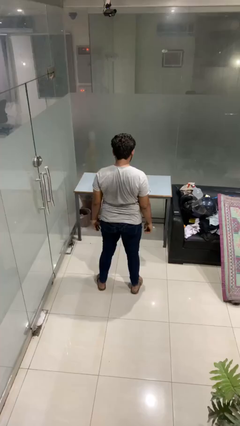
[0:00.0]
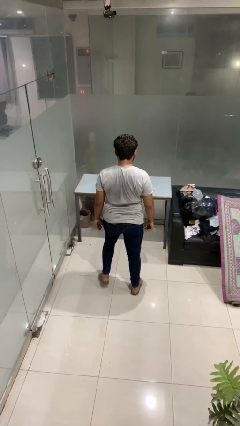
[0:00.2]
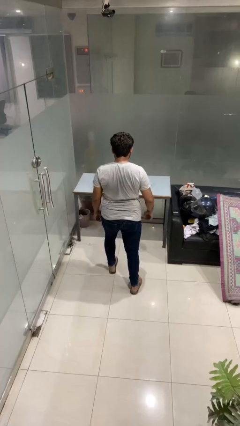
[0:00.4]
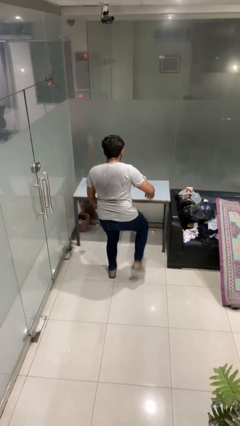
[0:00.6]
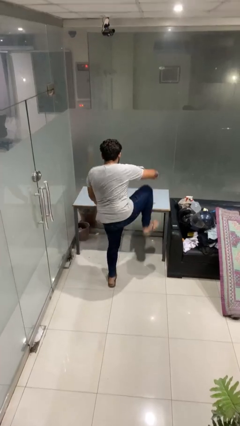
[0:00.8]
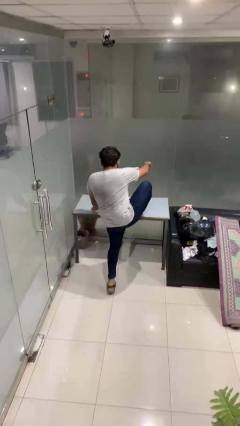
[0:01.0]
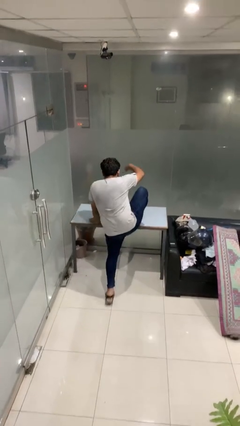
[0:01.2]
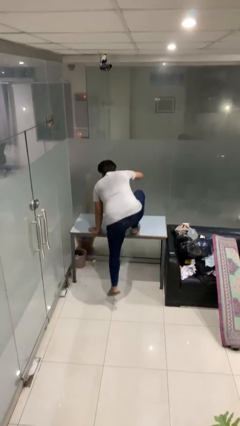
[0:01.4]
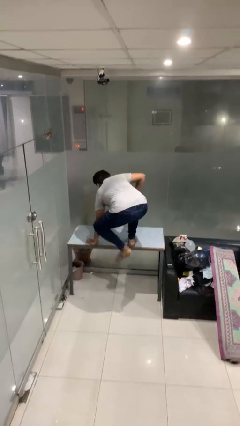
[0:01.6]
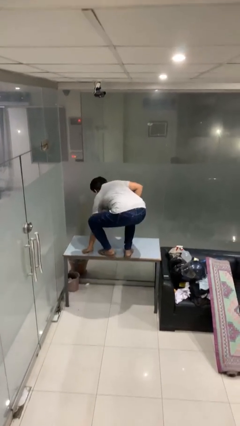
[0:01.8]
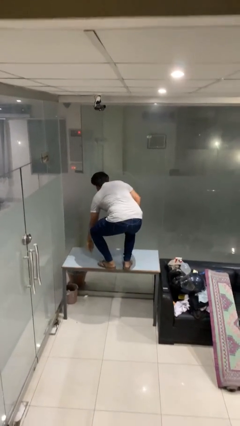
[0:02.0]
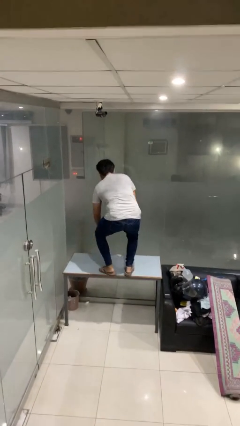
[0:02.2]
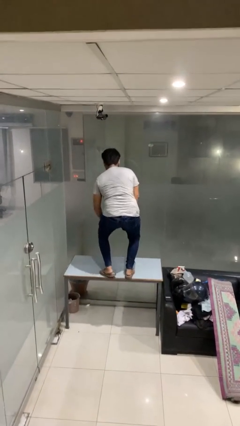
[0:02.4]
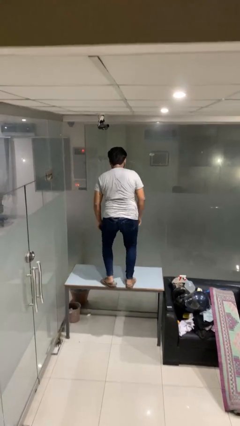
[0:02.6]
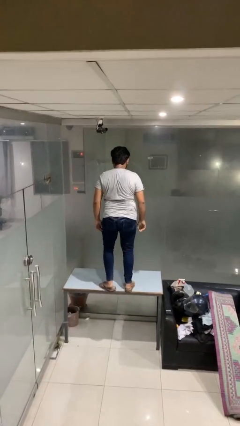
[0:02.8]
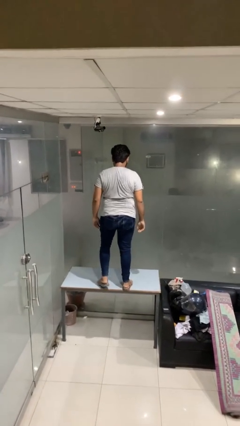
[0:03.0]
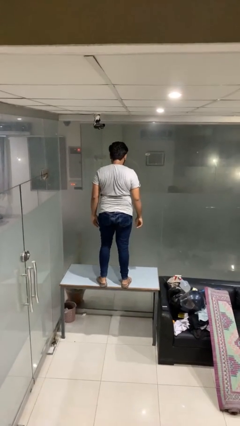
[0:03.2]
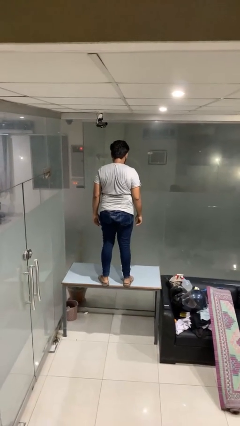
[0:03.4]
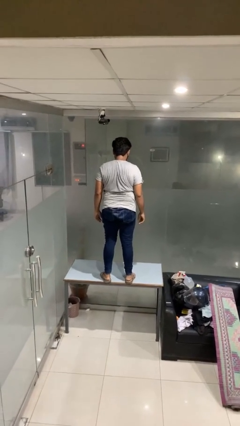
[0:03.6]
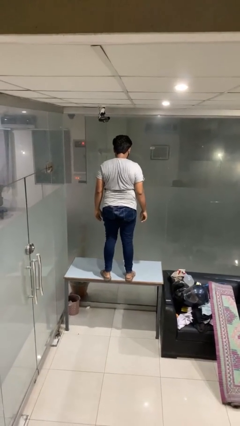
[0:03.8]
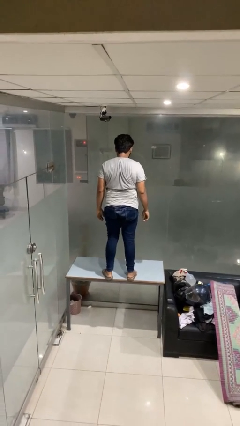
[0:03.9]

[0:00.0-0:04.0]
person climbs on table

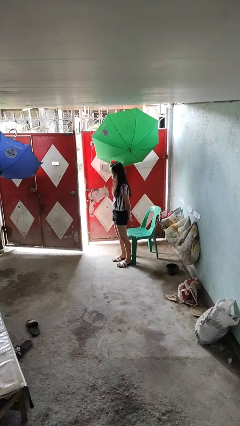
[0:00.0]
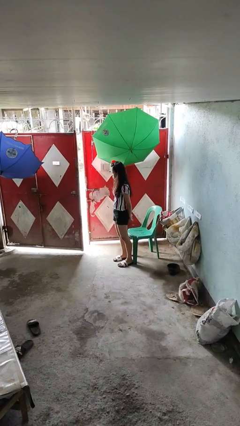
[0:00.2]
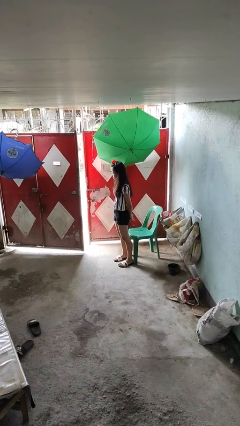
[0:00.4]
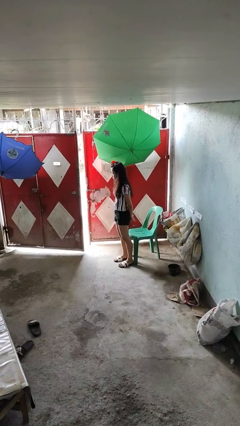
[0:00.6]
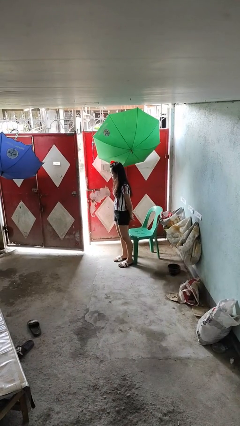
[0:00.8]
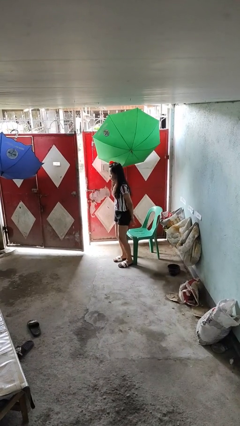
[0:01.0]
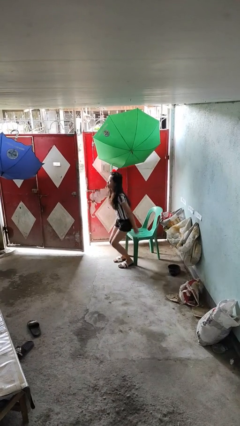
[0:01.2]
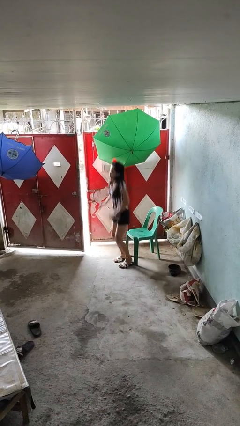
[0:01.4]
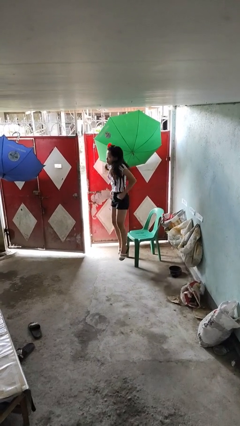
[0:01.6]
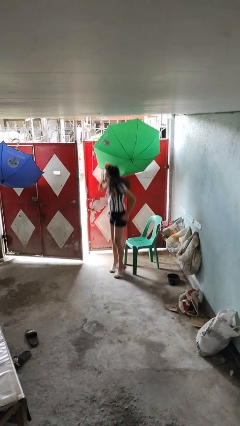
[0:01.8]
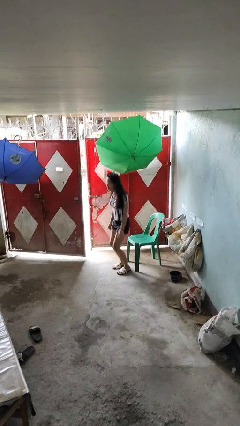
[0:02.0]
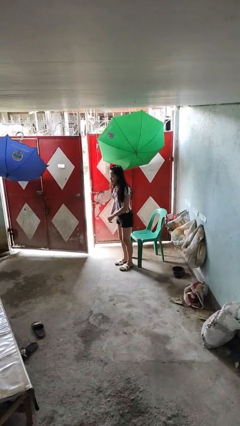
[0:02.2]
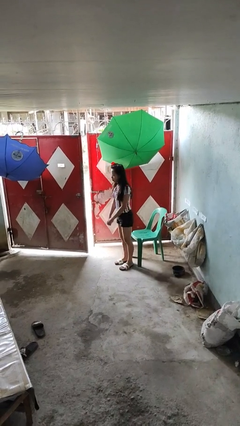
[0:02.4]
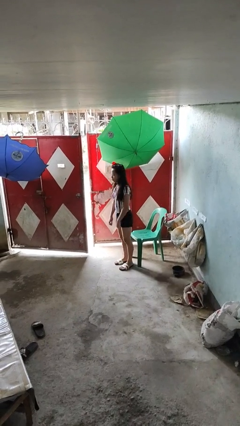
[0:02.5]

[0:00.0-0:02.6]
person jumps

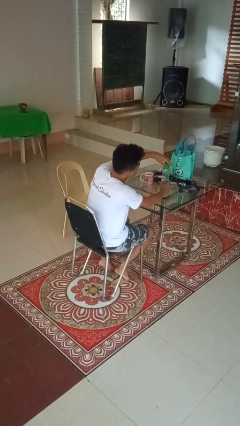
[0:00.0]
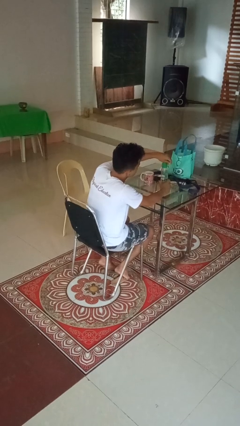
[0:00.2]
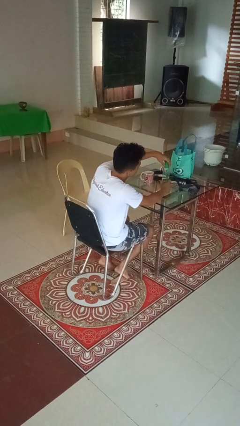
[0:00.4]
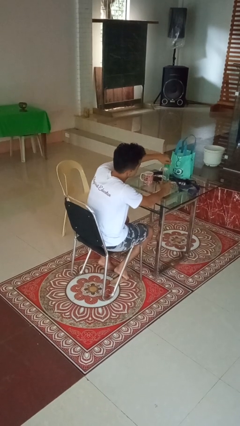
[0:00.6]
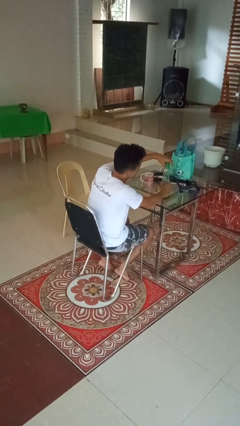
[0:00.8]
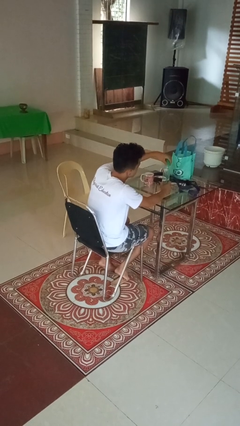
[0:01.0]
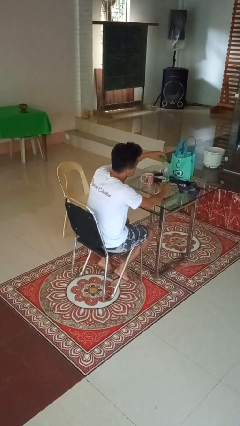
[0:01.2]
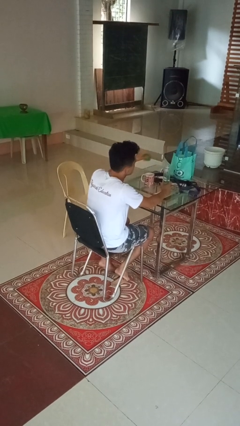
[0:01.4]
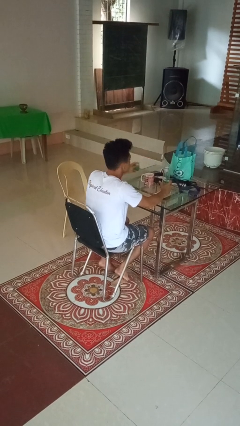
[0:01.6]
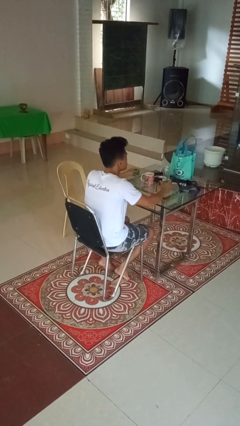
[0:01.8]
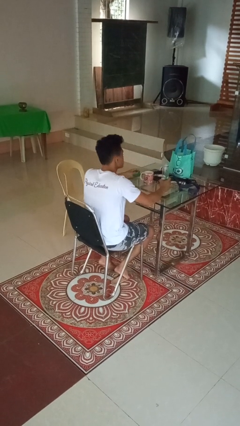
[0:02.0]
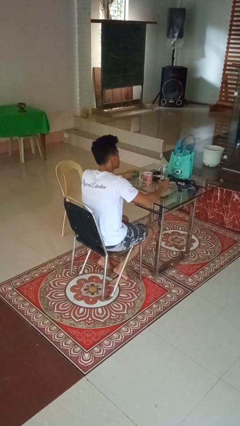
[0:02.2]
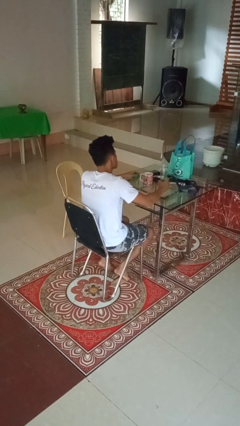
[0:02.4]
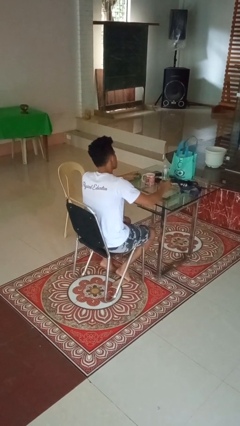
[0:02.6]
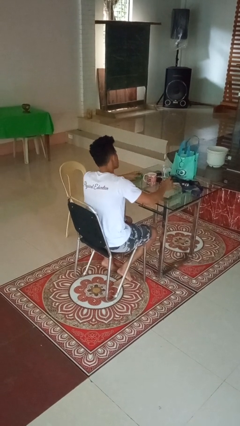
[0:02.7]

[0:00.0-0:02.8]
person unscrews lid from bottle

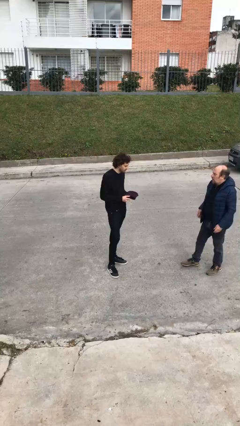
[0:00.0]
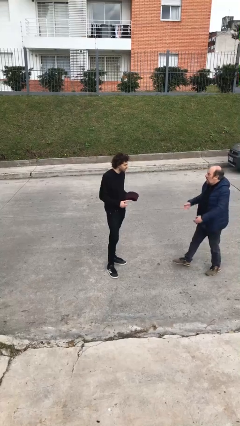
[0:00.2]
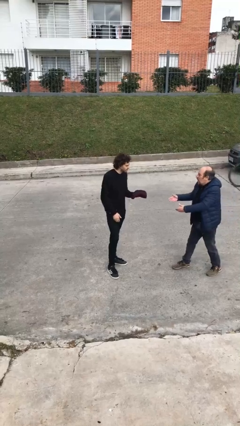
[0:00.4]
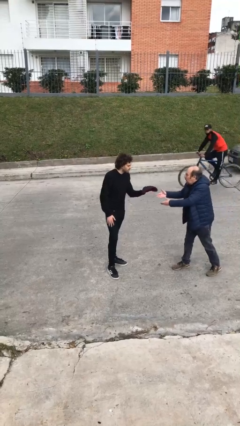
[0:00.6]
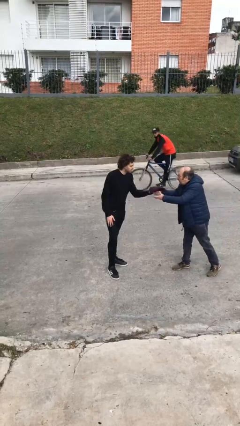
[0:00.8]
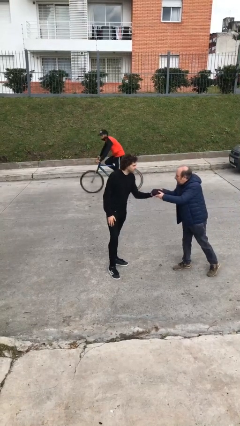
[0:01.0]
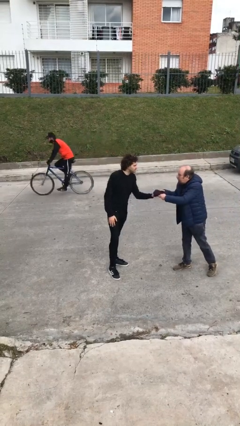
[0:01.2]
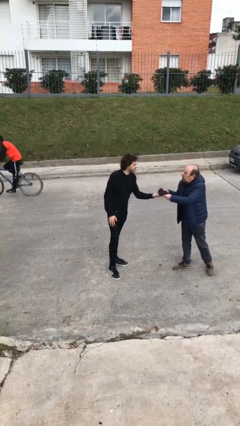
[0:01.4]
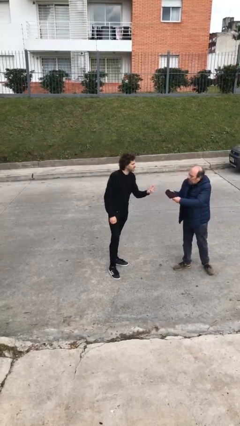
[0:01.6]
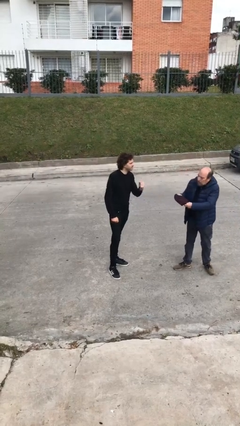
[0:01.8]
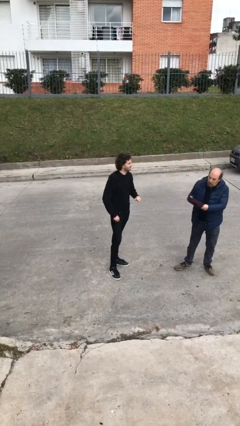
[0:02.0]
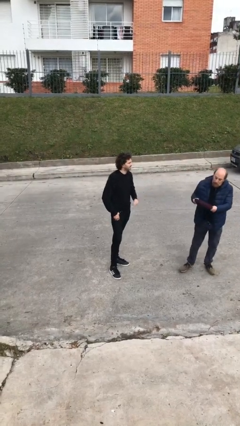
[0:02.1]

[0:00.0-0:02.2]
person transfers object to person

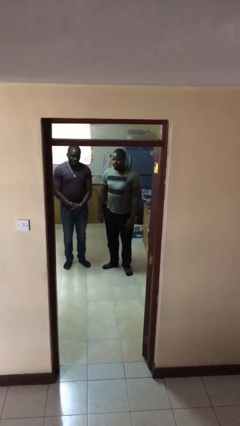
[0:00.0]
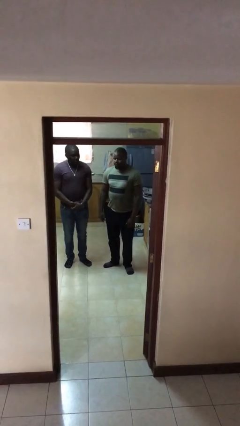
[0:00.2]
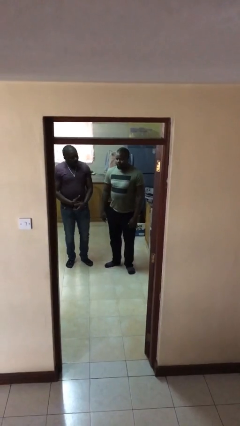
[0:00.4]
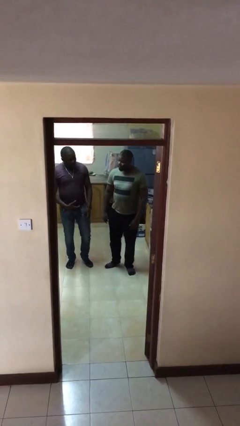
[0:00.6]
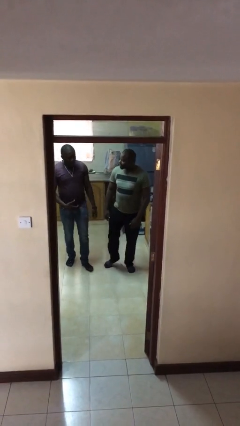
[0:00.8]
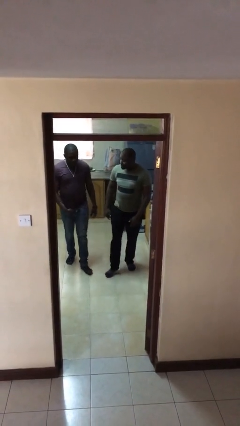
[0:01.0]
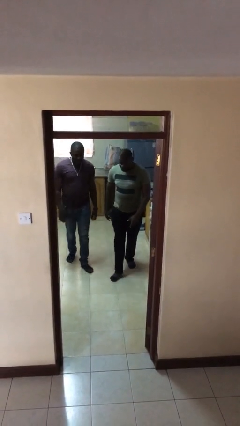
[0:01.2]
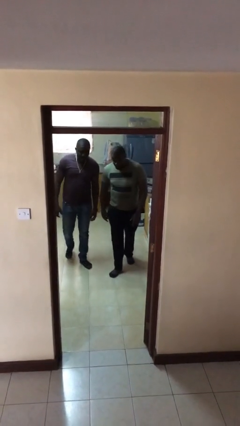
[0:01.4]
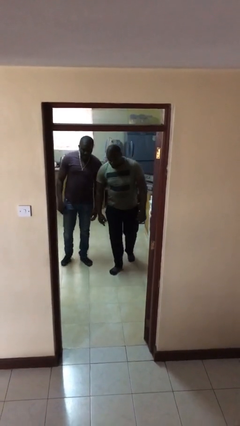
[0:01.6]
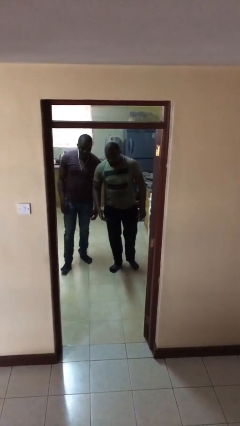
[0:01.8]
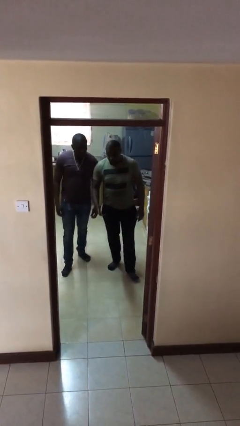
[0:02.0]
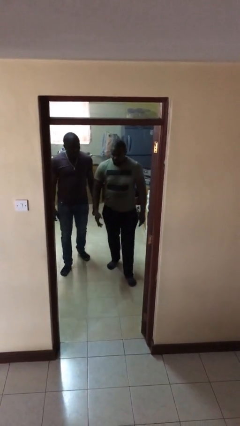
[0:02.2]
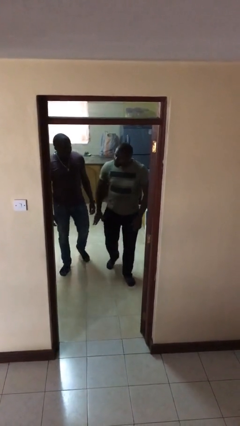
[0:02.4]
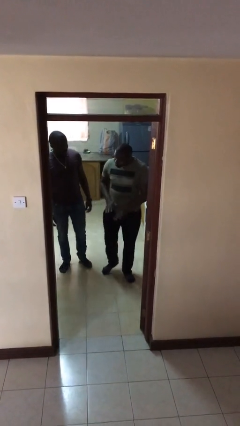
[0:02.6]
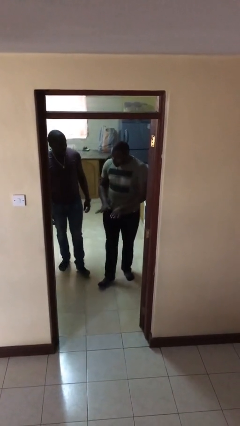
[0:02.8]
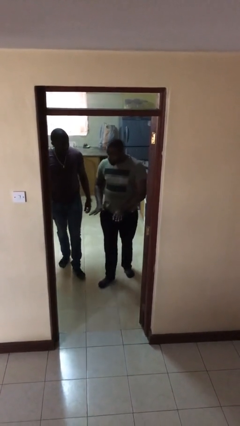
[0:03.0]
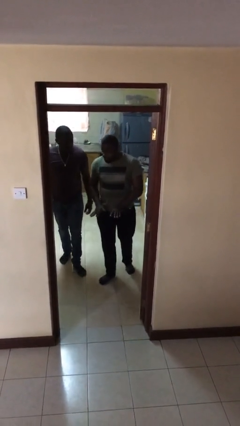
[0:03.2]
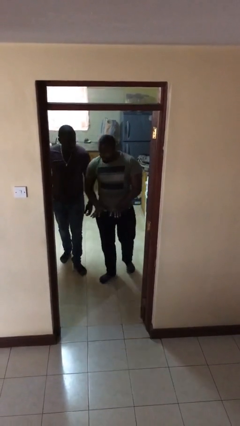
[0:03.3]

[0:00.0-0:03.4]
person talks to person

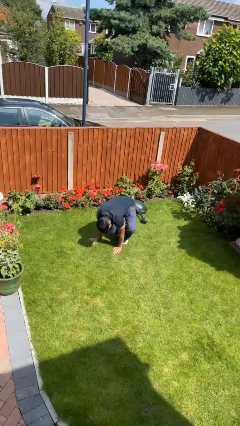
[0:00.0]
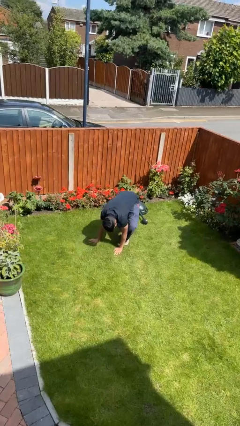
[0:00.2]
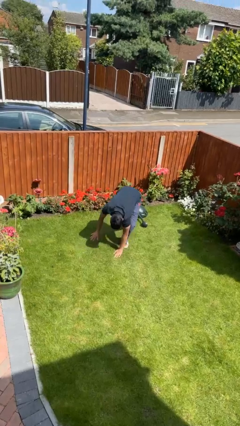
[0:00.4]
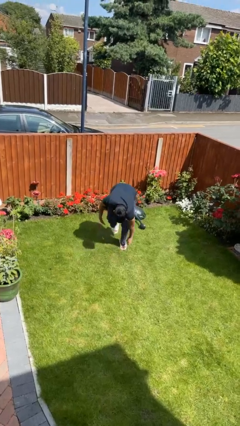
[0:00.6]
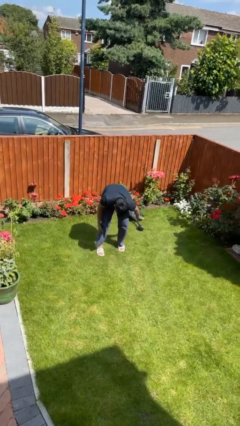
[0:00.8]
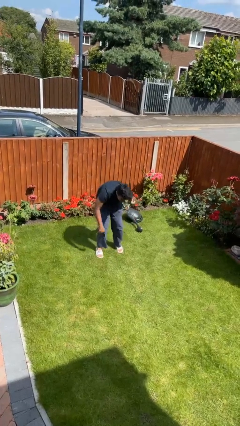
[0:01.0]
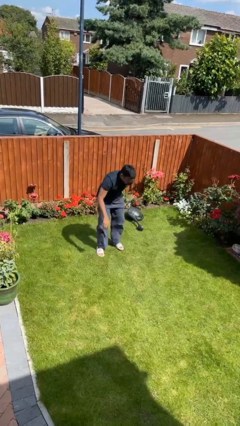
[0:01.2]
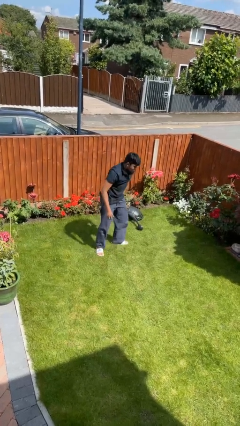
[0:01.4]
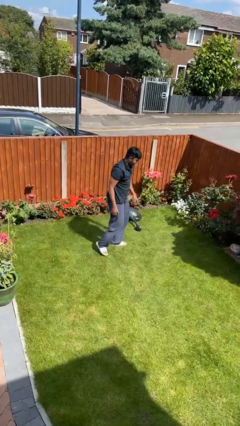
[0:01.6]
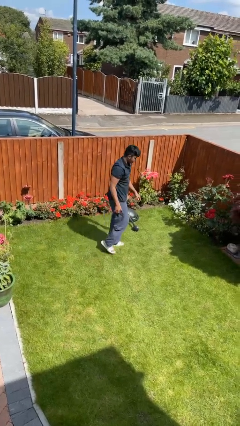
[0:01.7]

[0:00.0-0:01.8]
person stands up from floor

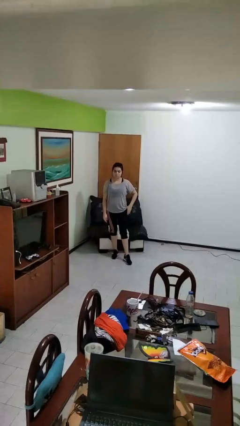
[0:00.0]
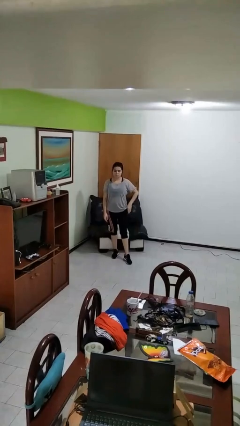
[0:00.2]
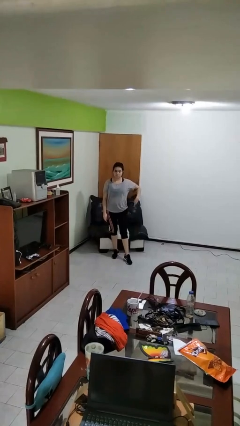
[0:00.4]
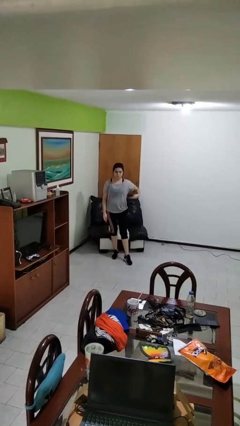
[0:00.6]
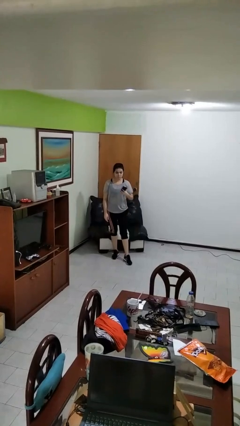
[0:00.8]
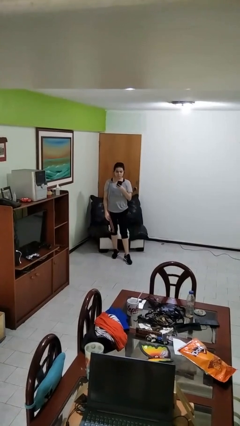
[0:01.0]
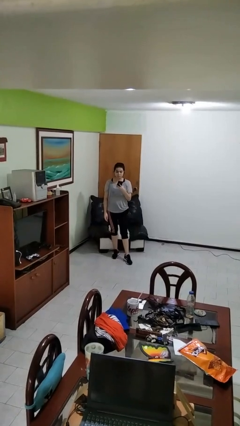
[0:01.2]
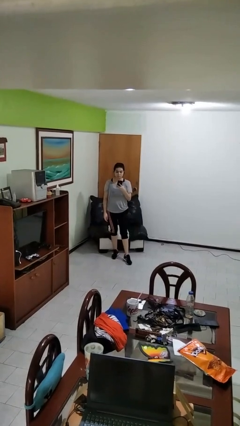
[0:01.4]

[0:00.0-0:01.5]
person takes phone from pocket
